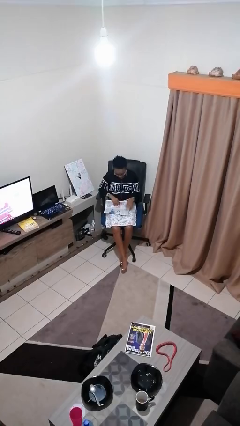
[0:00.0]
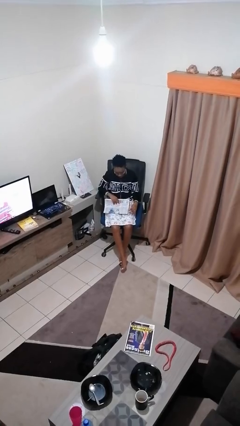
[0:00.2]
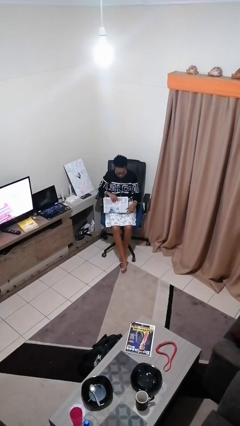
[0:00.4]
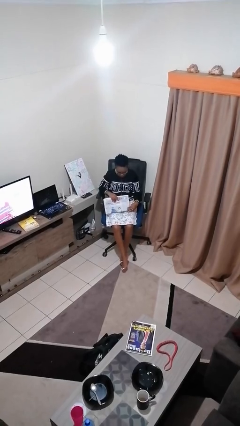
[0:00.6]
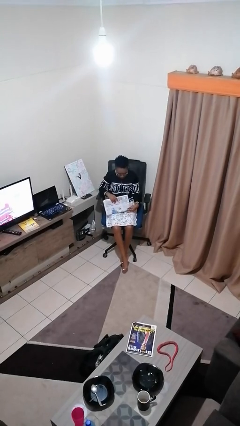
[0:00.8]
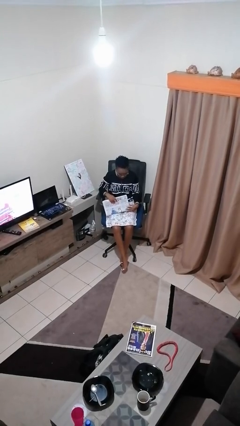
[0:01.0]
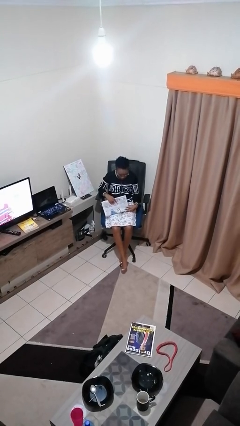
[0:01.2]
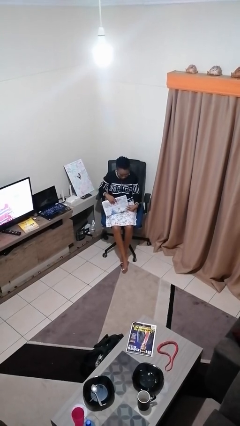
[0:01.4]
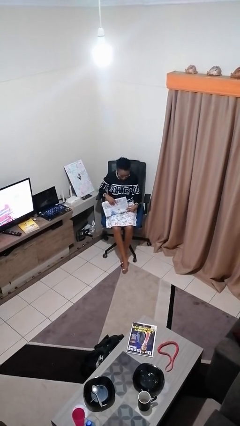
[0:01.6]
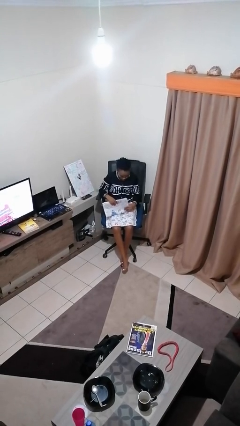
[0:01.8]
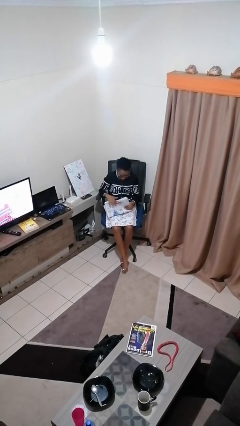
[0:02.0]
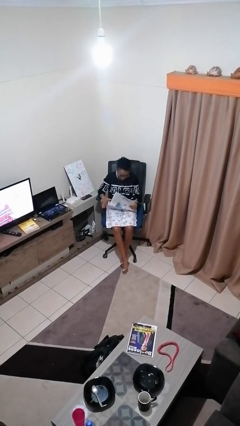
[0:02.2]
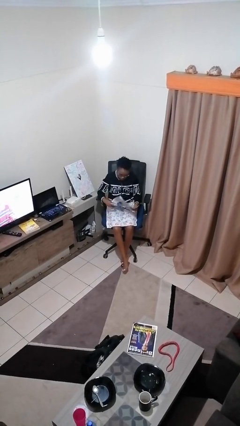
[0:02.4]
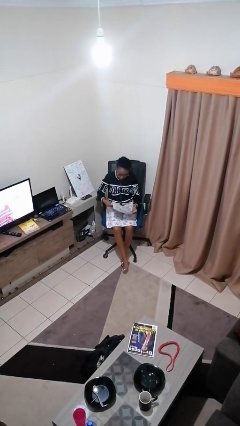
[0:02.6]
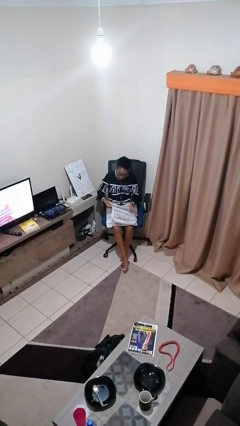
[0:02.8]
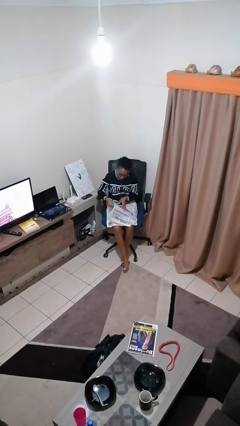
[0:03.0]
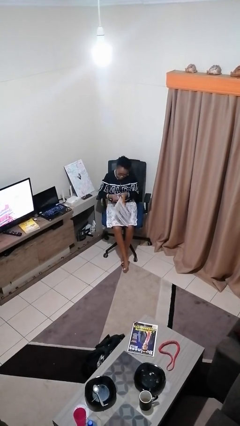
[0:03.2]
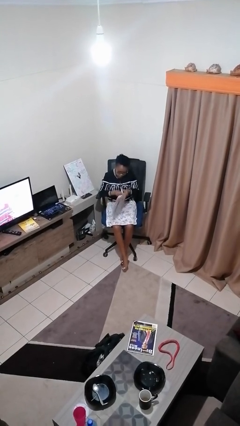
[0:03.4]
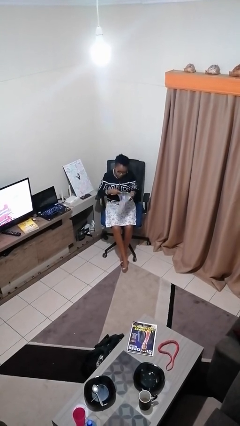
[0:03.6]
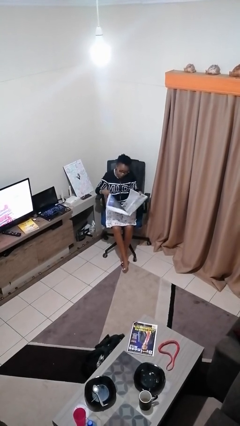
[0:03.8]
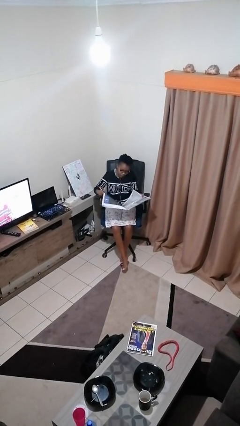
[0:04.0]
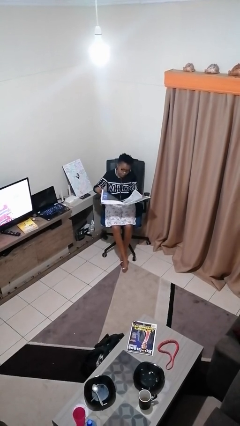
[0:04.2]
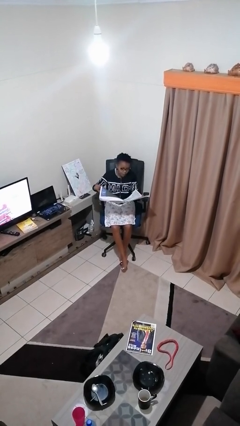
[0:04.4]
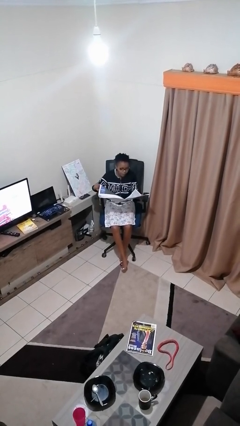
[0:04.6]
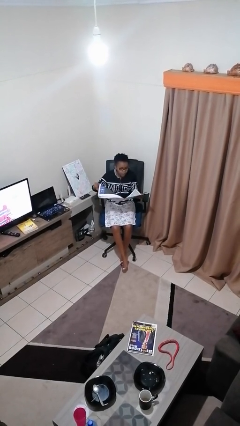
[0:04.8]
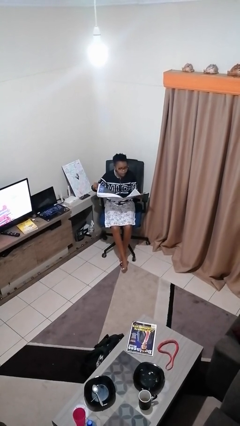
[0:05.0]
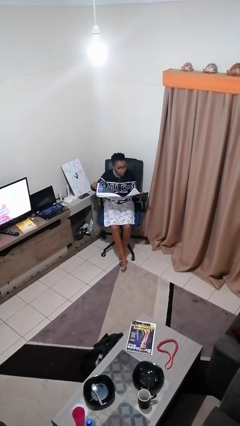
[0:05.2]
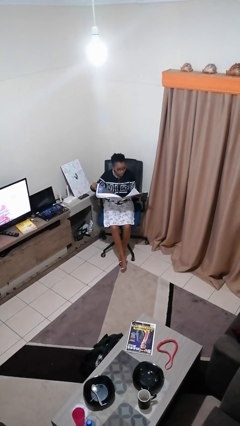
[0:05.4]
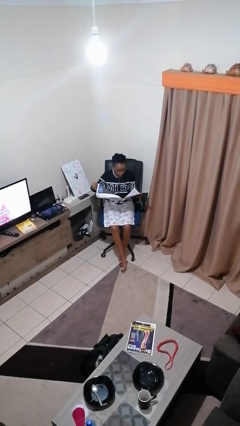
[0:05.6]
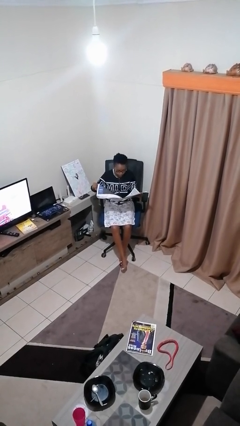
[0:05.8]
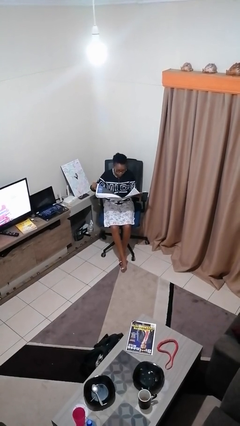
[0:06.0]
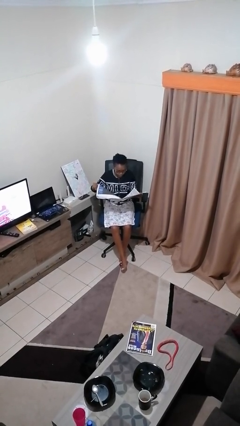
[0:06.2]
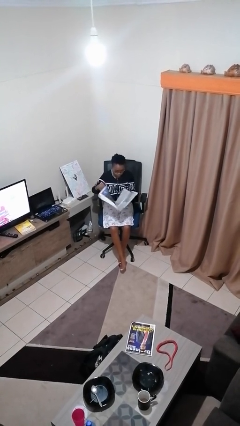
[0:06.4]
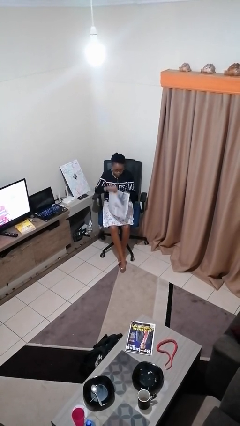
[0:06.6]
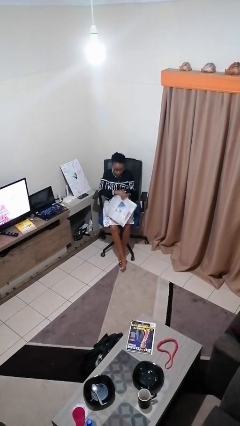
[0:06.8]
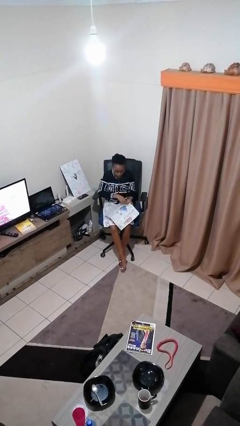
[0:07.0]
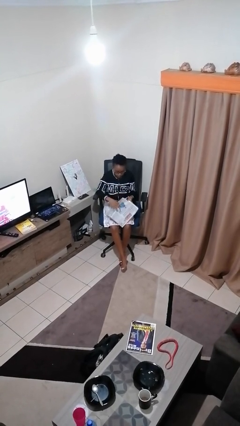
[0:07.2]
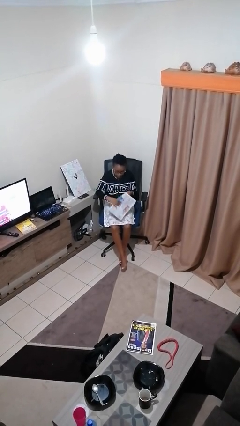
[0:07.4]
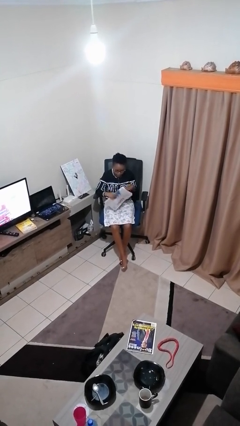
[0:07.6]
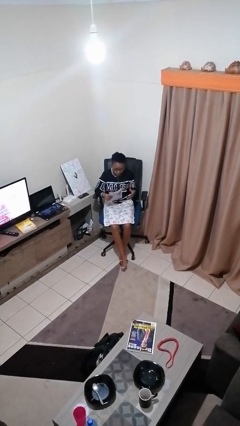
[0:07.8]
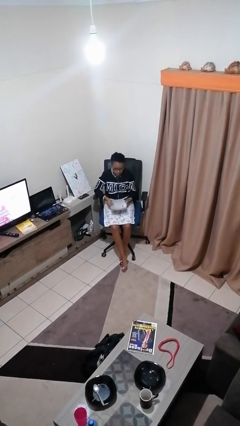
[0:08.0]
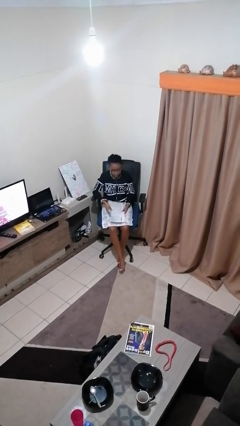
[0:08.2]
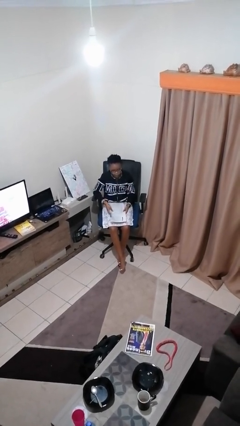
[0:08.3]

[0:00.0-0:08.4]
person reads newspaper

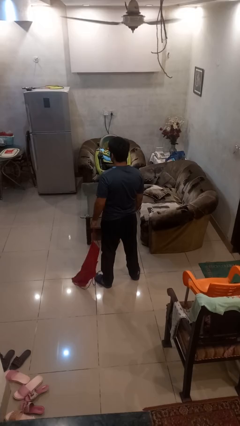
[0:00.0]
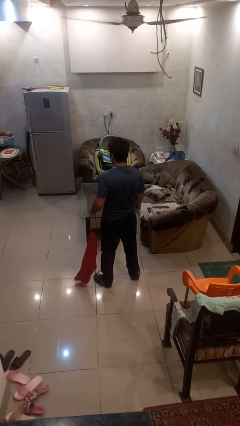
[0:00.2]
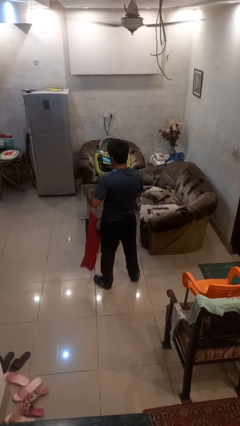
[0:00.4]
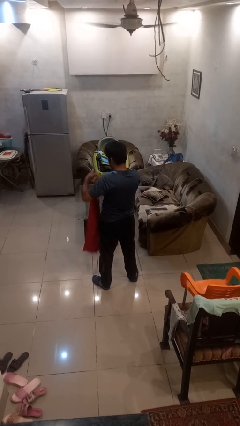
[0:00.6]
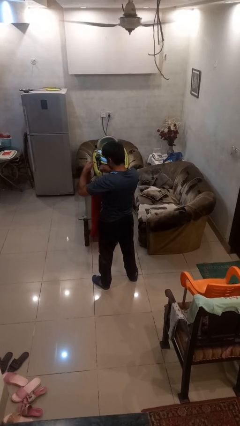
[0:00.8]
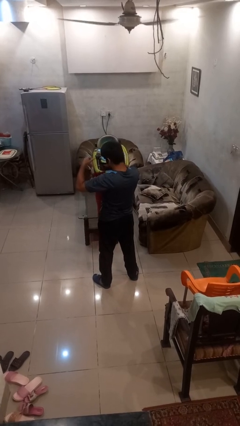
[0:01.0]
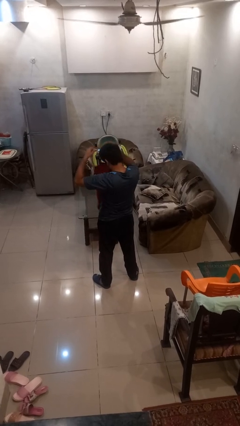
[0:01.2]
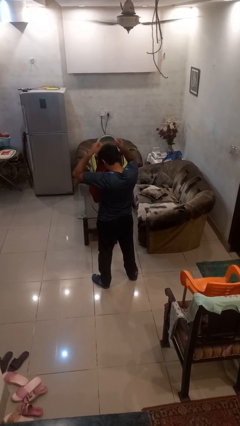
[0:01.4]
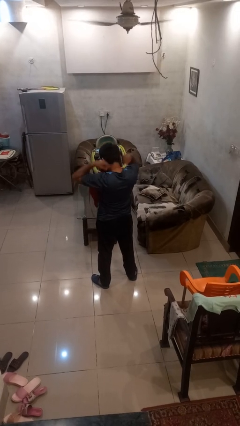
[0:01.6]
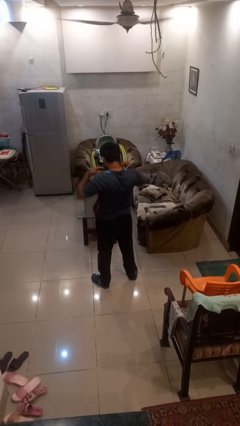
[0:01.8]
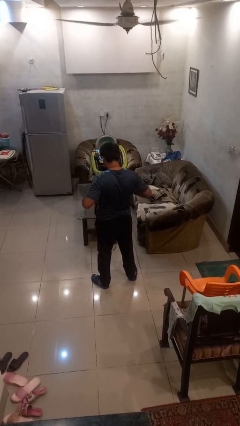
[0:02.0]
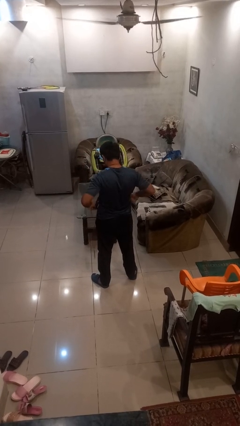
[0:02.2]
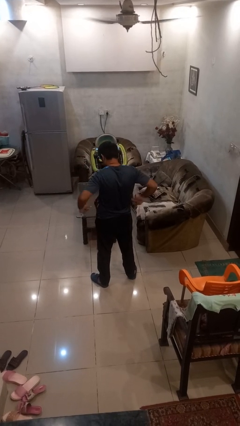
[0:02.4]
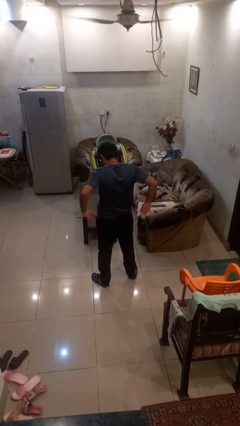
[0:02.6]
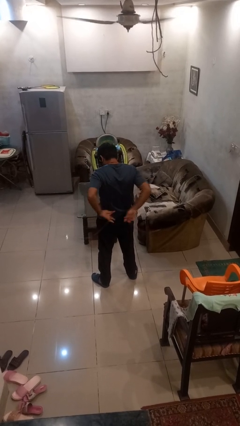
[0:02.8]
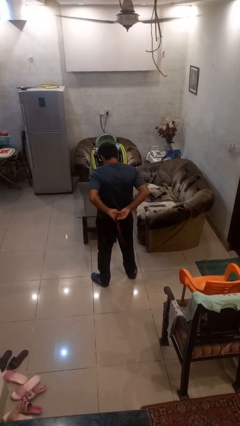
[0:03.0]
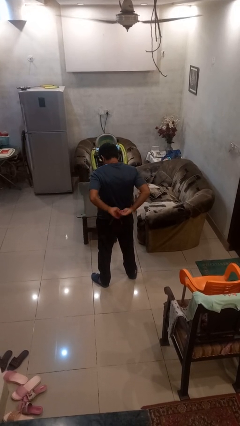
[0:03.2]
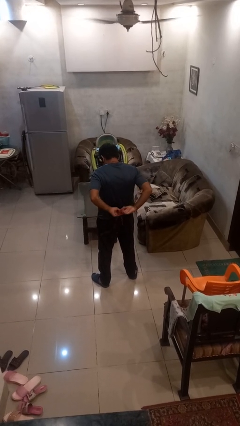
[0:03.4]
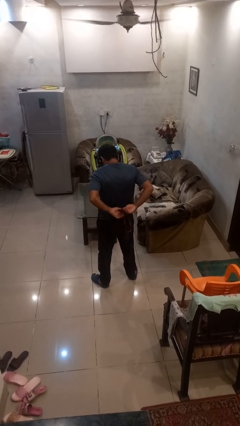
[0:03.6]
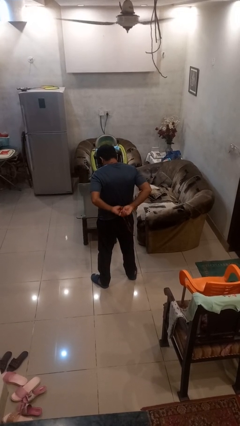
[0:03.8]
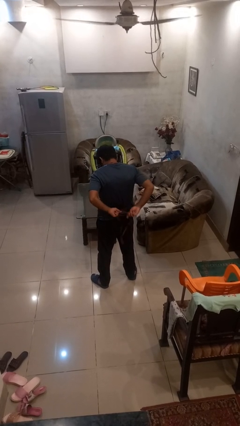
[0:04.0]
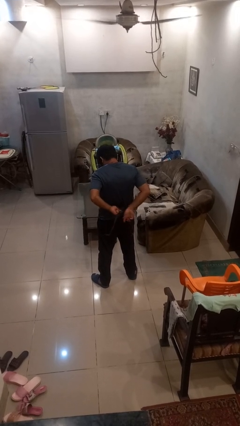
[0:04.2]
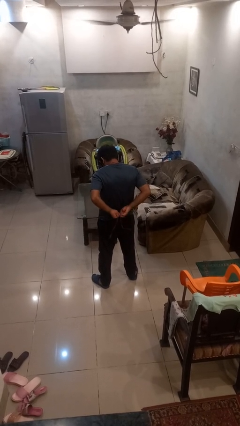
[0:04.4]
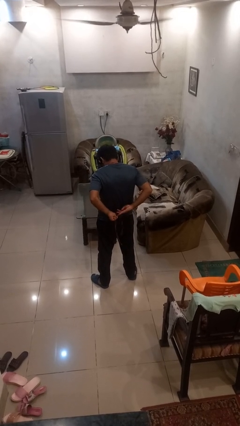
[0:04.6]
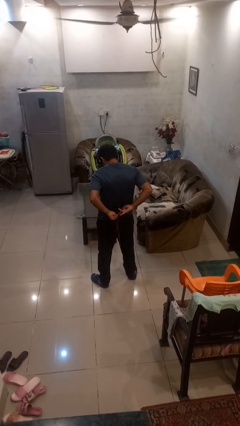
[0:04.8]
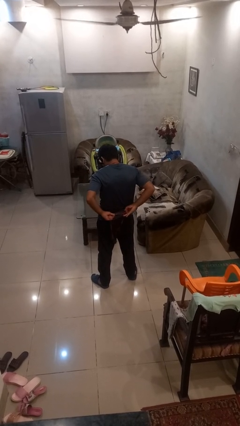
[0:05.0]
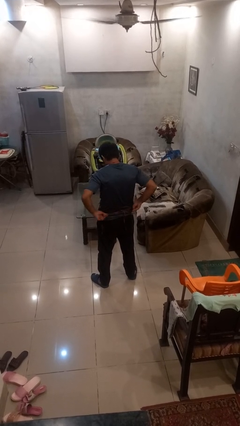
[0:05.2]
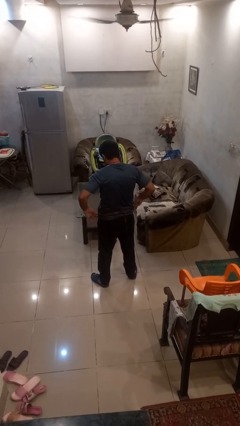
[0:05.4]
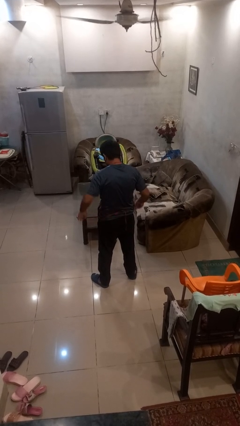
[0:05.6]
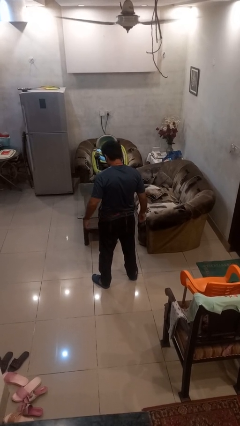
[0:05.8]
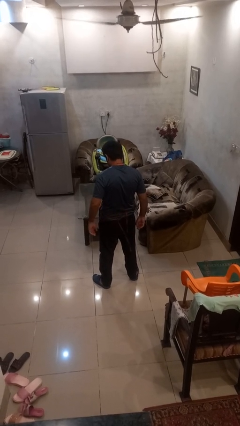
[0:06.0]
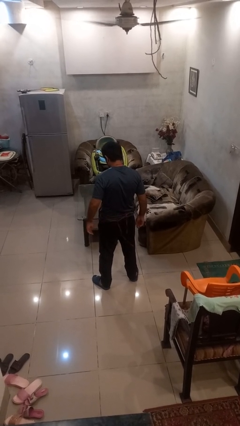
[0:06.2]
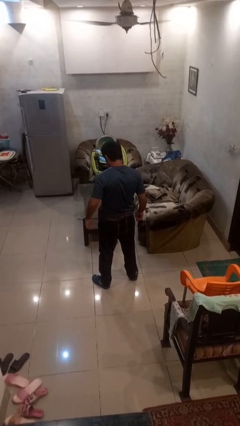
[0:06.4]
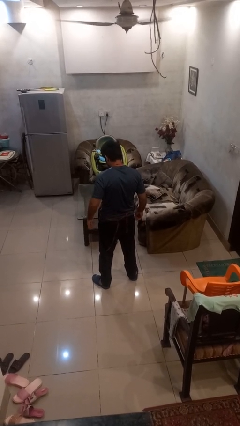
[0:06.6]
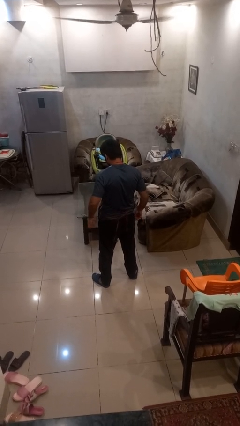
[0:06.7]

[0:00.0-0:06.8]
person puts on apron

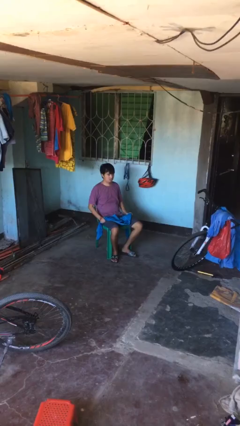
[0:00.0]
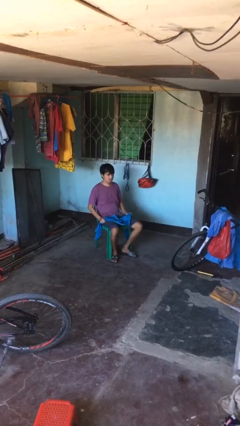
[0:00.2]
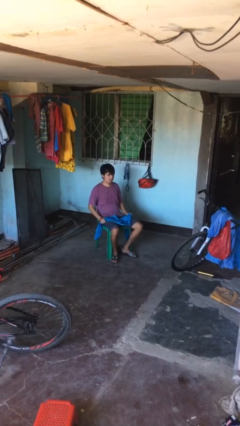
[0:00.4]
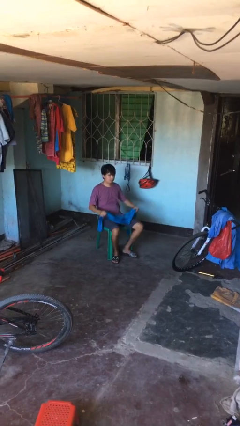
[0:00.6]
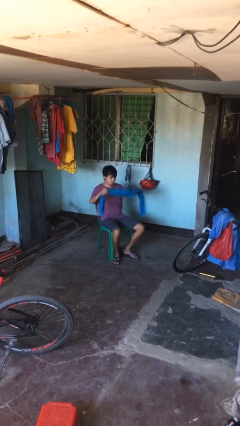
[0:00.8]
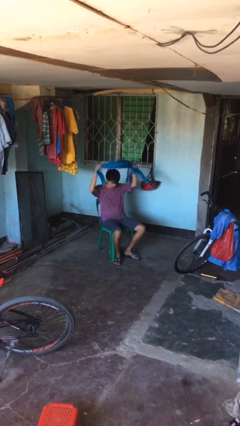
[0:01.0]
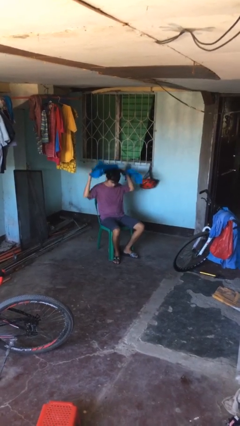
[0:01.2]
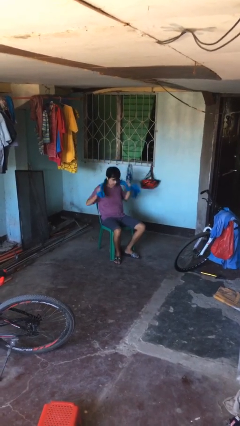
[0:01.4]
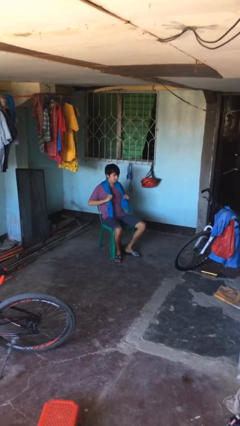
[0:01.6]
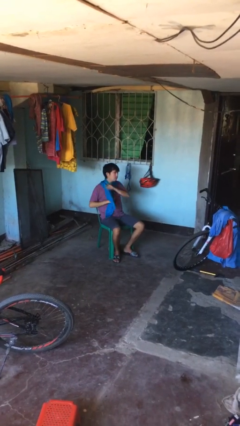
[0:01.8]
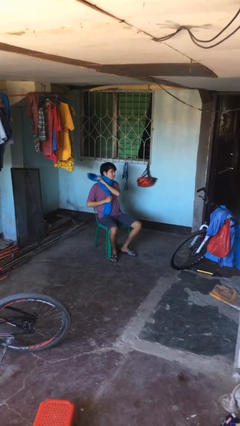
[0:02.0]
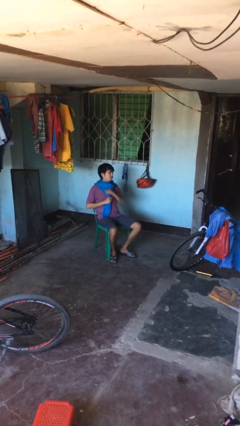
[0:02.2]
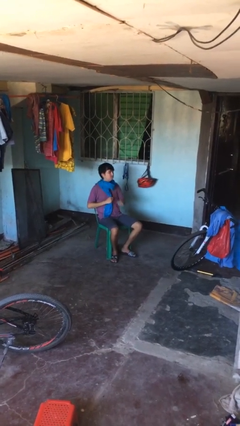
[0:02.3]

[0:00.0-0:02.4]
person puts on scarf

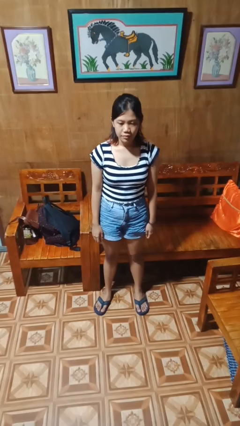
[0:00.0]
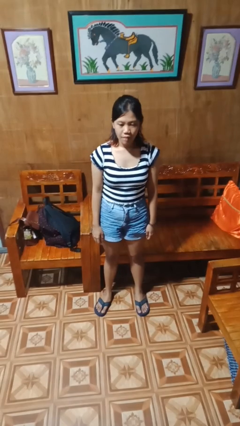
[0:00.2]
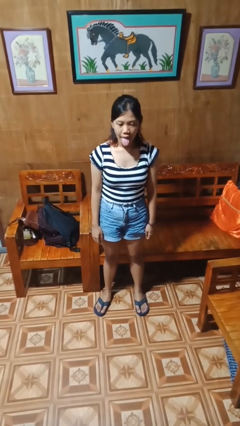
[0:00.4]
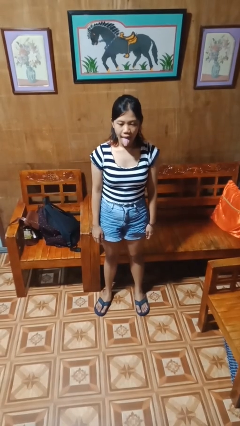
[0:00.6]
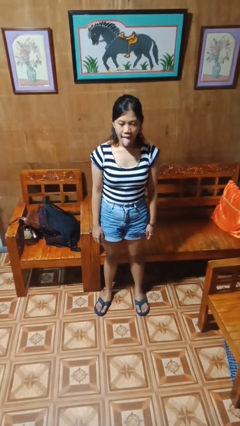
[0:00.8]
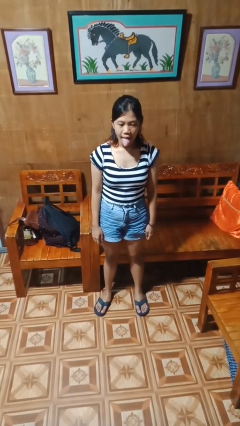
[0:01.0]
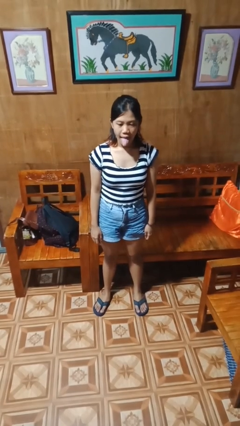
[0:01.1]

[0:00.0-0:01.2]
person sticks out tongue
